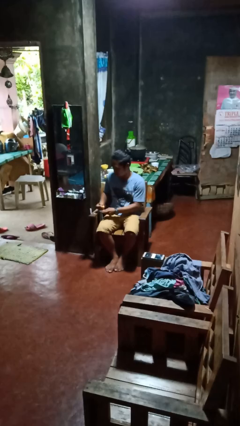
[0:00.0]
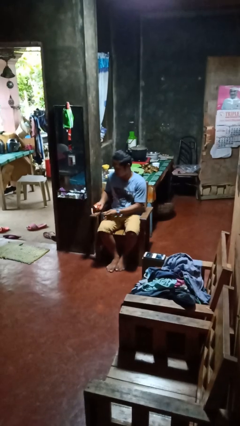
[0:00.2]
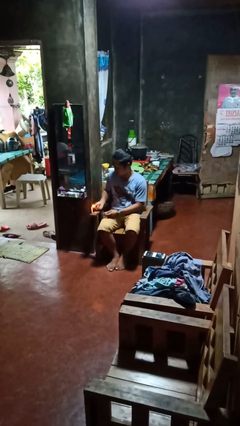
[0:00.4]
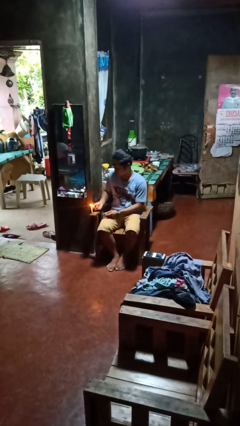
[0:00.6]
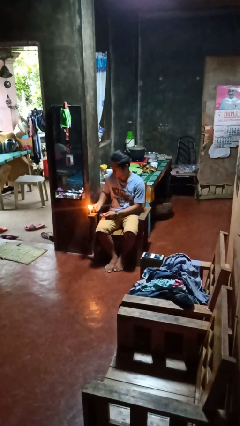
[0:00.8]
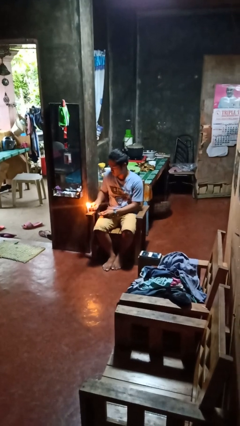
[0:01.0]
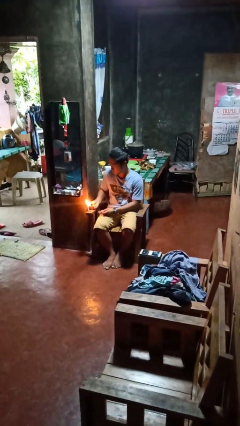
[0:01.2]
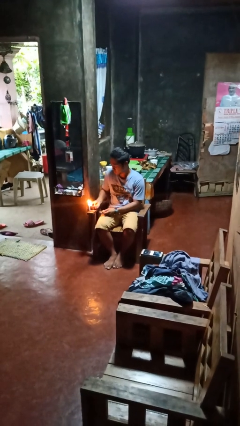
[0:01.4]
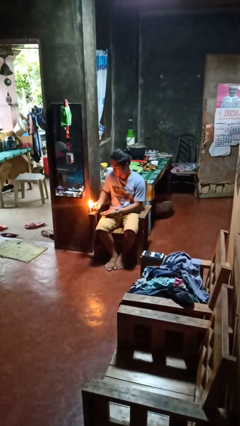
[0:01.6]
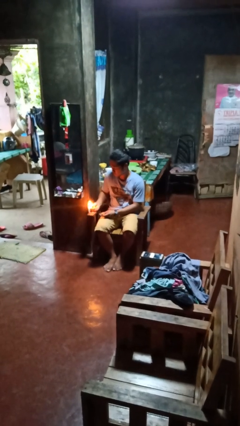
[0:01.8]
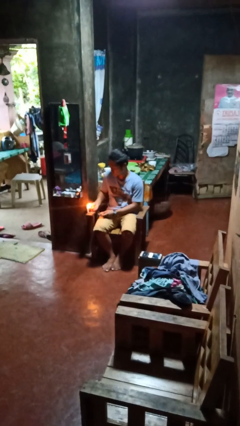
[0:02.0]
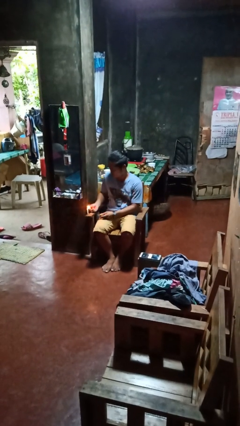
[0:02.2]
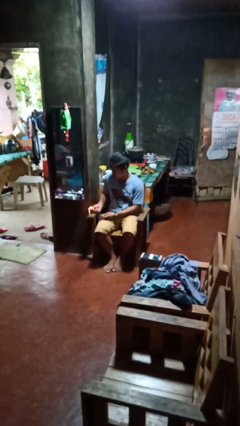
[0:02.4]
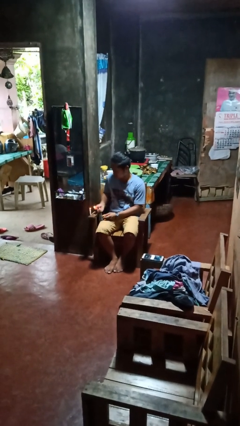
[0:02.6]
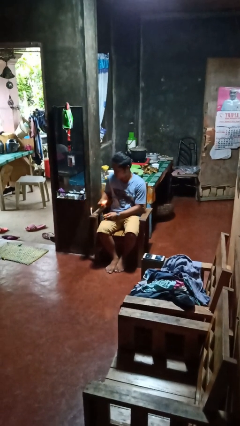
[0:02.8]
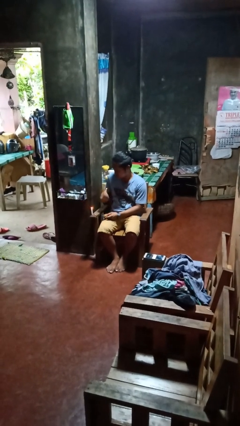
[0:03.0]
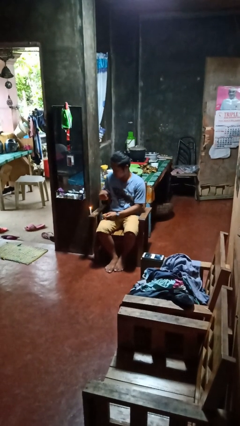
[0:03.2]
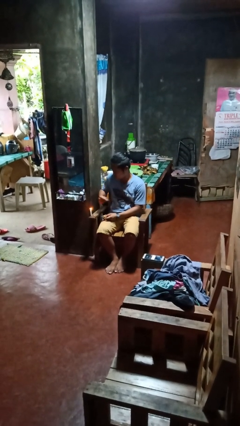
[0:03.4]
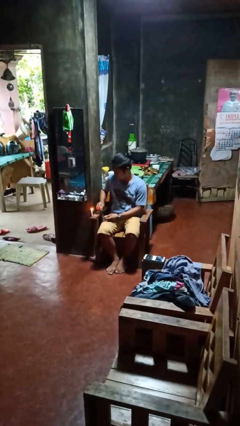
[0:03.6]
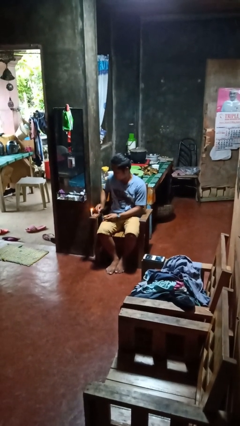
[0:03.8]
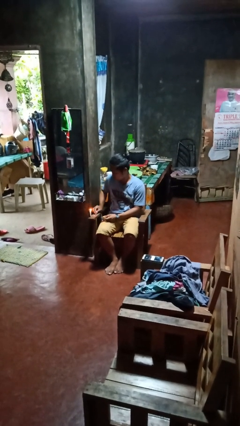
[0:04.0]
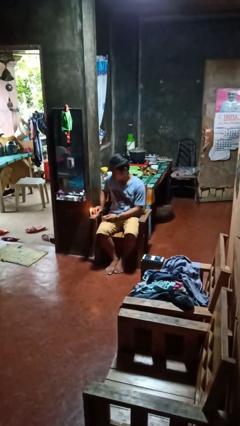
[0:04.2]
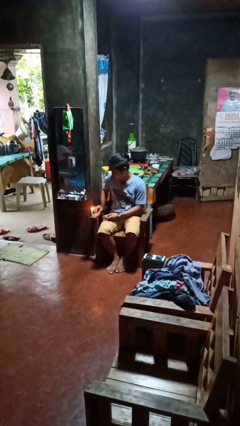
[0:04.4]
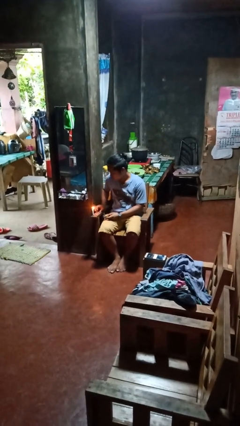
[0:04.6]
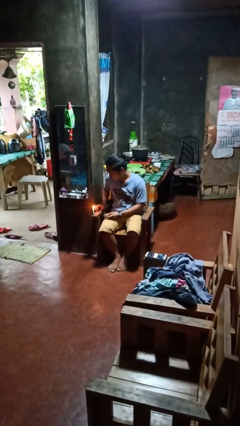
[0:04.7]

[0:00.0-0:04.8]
person lights candle

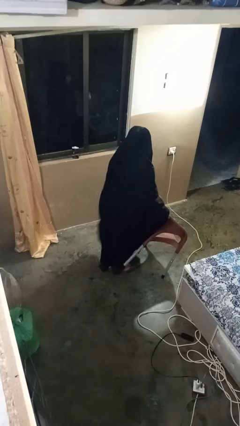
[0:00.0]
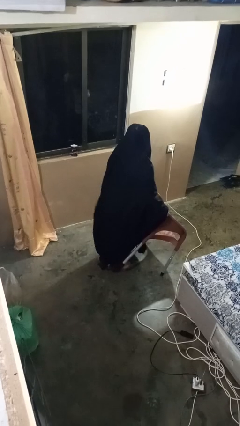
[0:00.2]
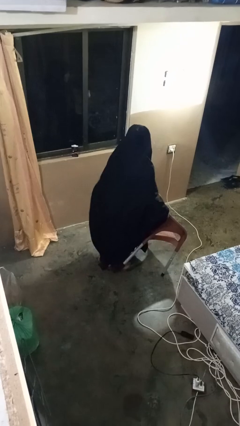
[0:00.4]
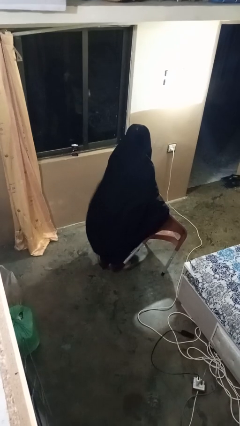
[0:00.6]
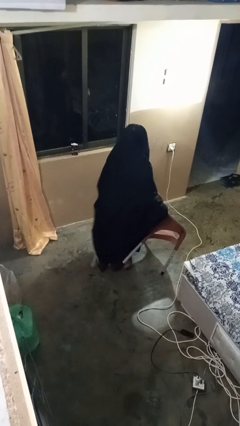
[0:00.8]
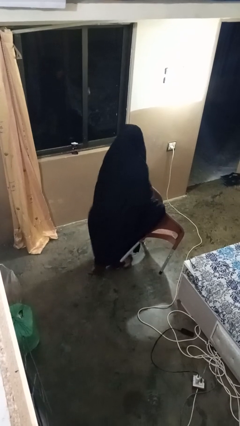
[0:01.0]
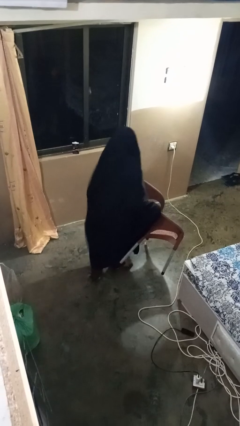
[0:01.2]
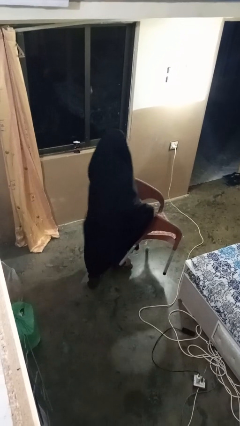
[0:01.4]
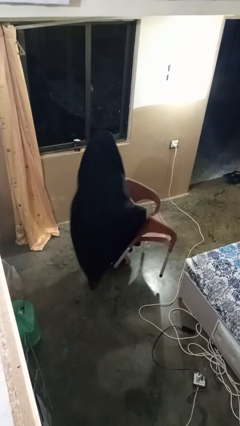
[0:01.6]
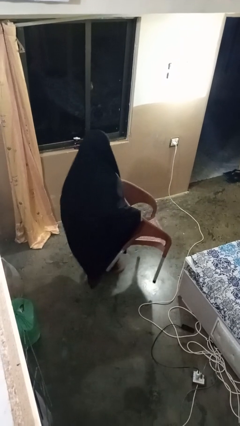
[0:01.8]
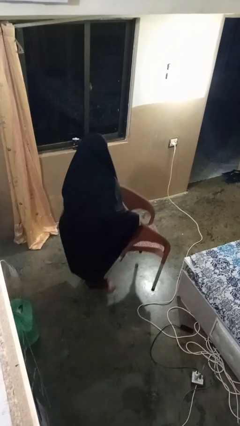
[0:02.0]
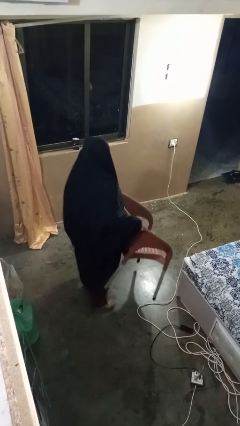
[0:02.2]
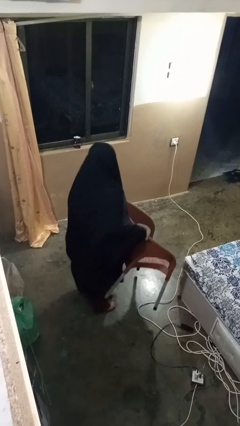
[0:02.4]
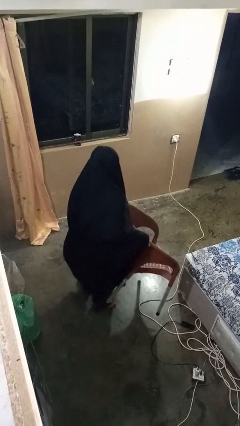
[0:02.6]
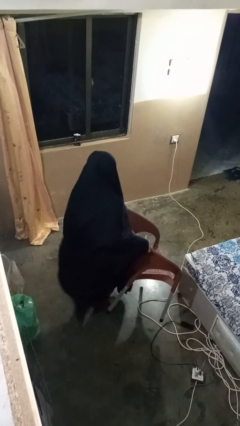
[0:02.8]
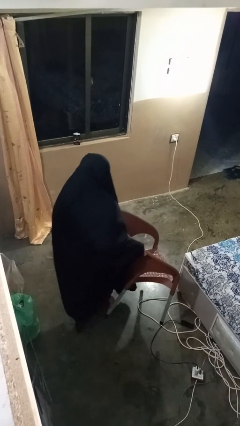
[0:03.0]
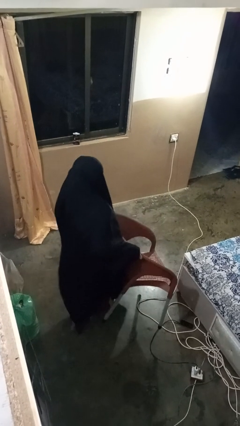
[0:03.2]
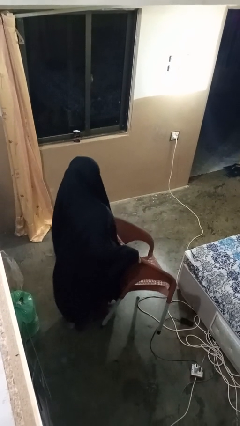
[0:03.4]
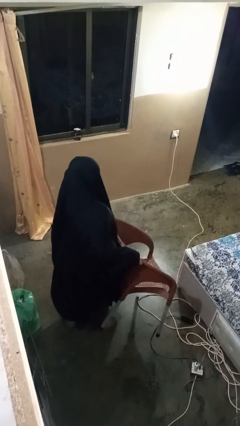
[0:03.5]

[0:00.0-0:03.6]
person carries furniture

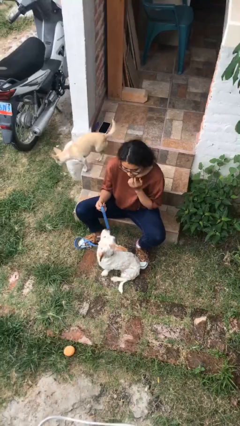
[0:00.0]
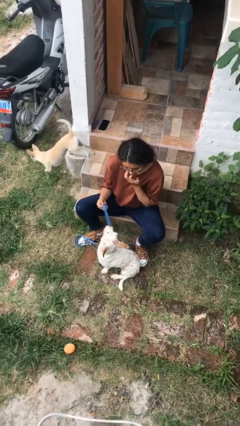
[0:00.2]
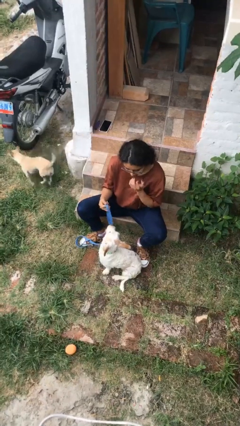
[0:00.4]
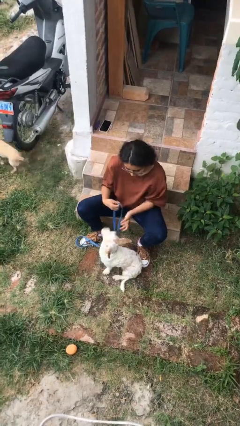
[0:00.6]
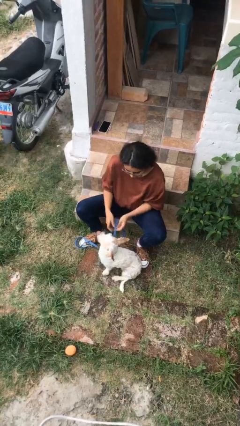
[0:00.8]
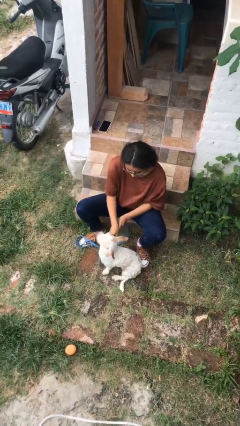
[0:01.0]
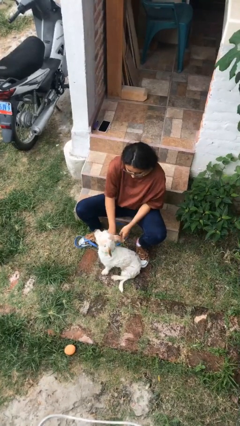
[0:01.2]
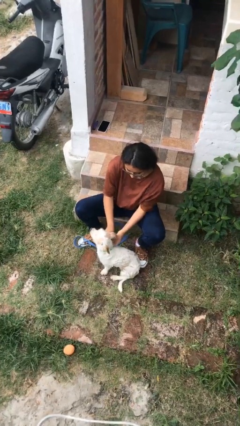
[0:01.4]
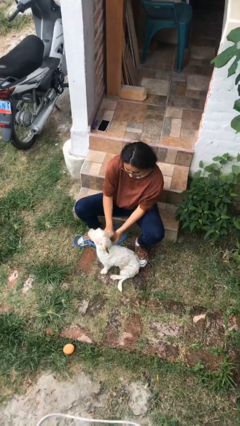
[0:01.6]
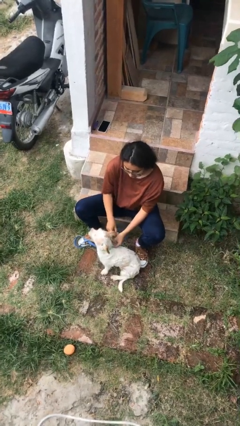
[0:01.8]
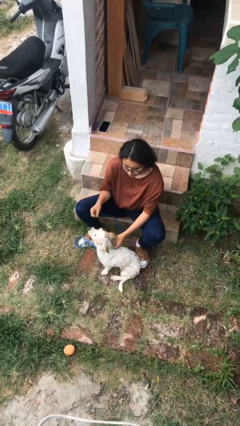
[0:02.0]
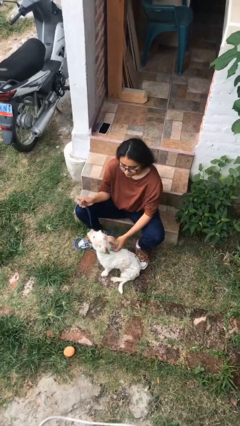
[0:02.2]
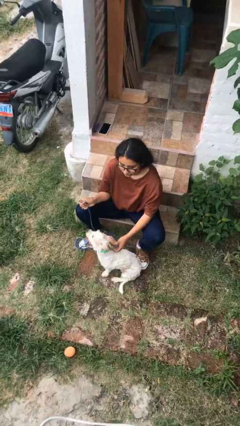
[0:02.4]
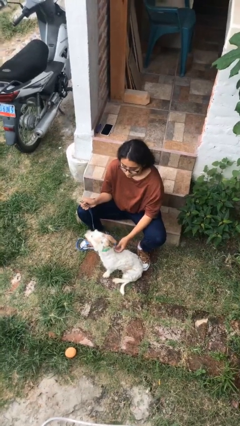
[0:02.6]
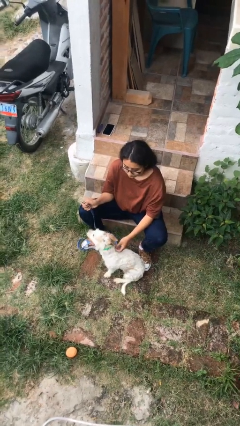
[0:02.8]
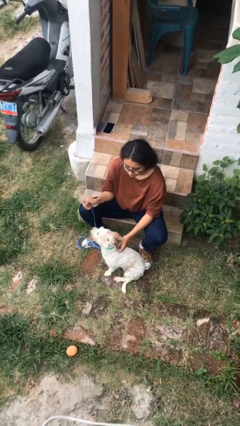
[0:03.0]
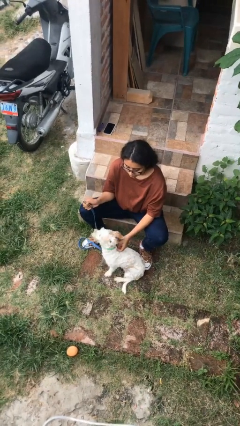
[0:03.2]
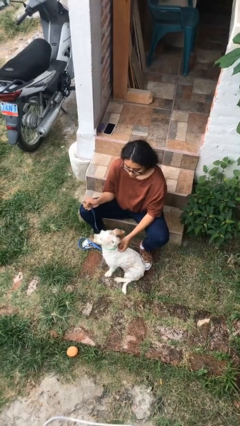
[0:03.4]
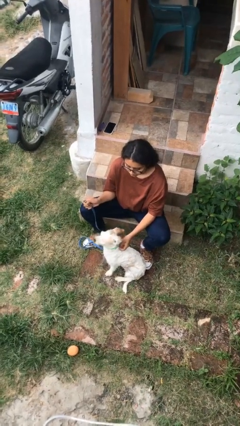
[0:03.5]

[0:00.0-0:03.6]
person unattaches leash from dog

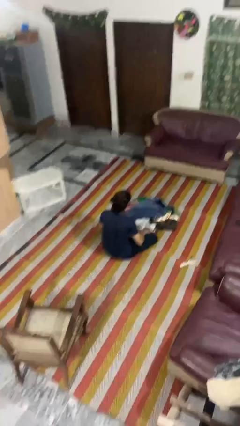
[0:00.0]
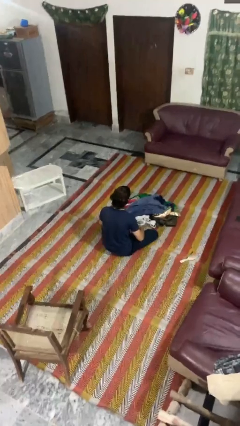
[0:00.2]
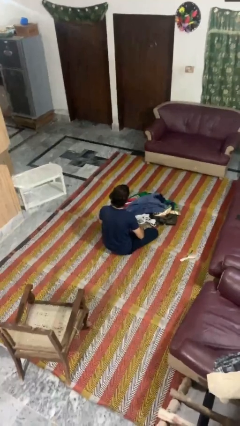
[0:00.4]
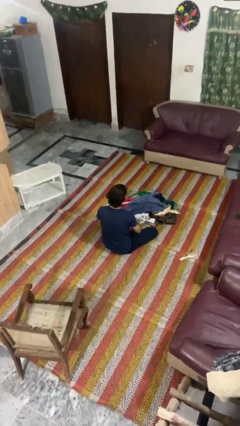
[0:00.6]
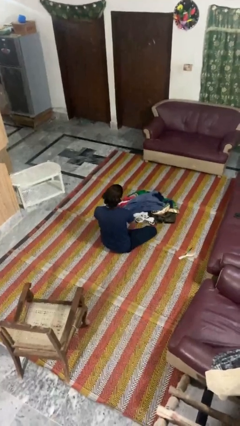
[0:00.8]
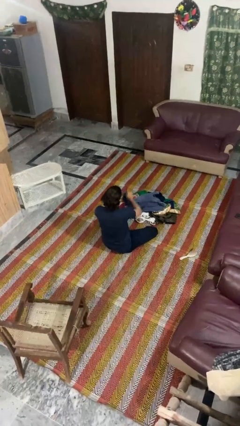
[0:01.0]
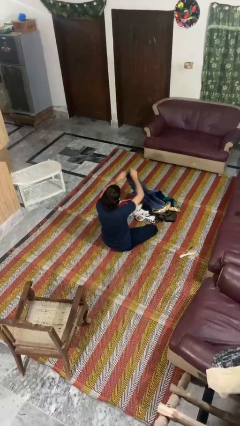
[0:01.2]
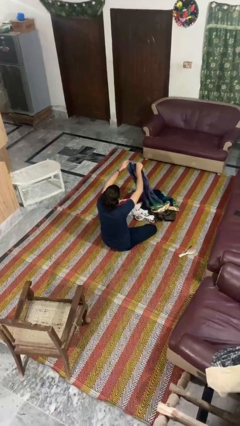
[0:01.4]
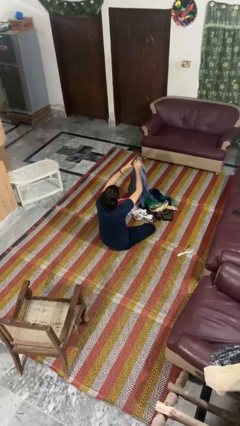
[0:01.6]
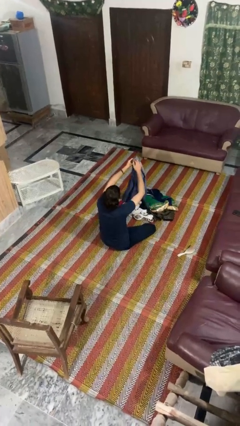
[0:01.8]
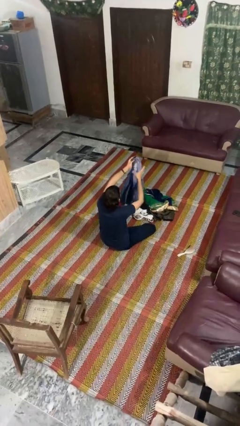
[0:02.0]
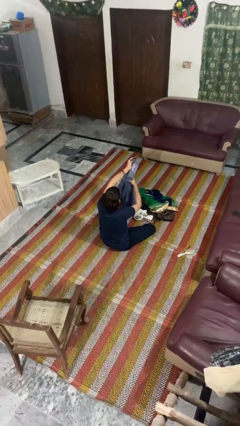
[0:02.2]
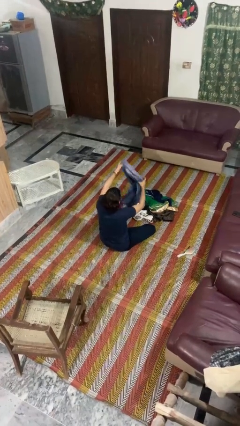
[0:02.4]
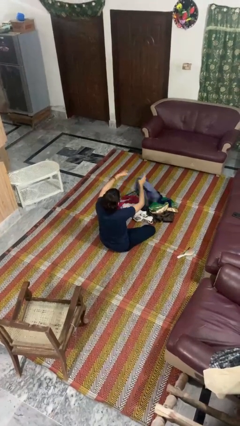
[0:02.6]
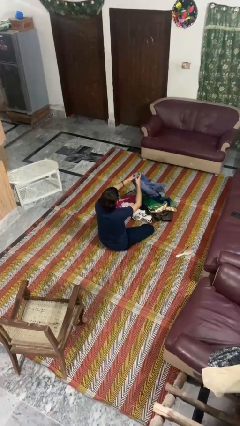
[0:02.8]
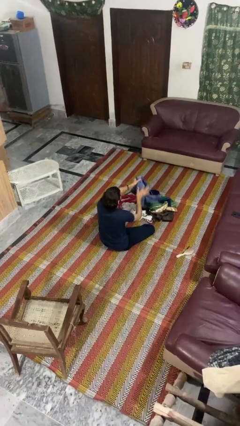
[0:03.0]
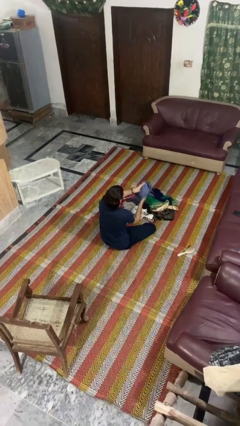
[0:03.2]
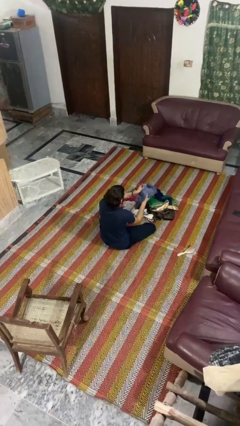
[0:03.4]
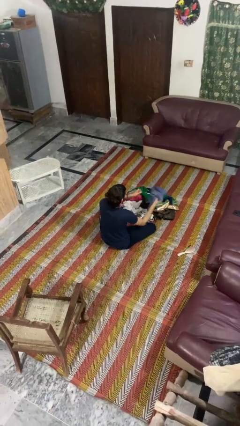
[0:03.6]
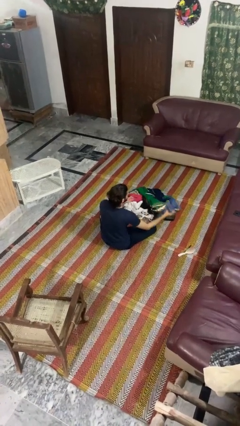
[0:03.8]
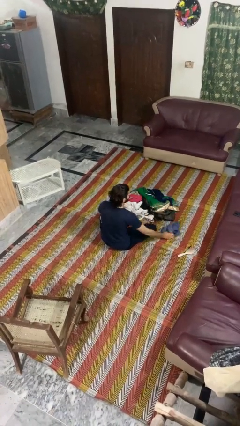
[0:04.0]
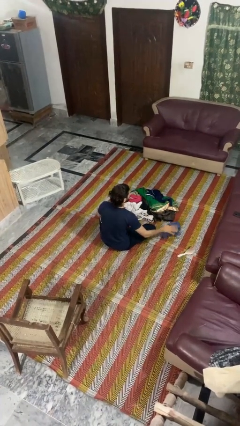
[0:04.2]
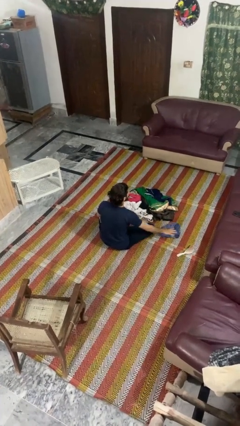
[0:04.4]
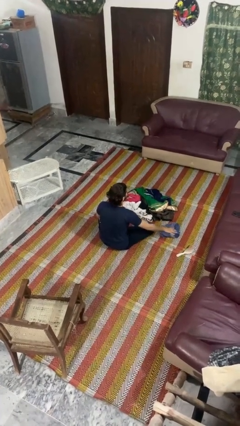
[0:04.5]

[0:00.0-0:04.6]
person folds pants

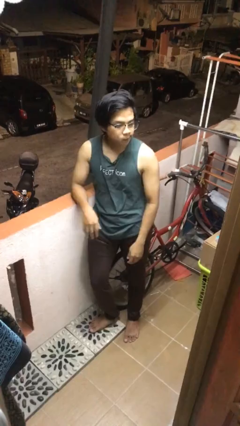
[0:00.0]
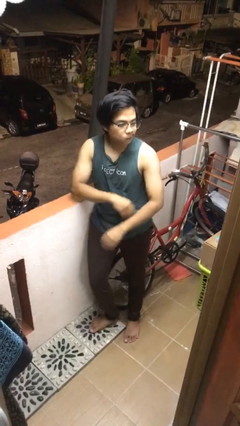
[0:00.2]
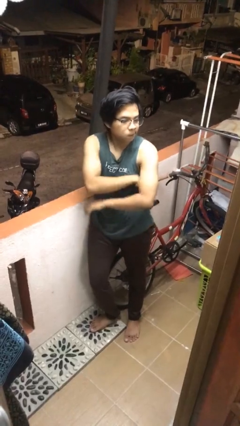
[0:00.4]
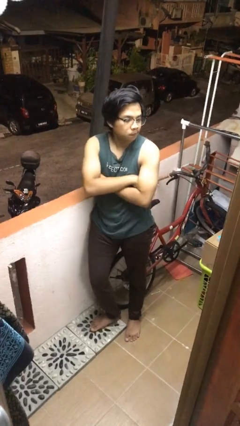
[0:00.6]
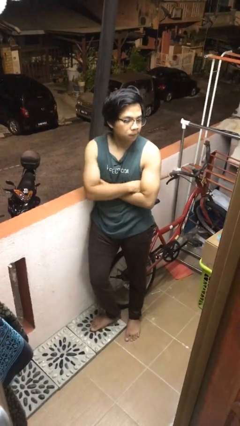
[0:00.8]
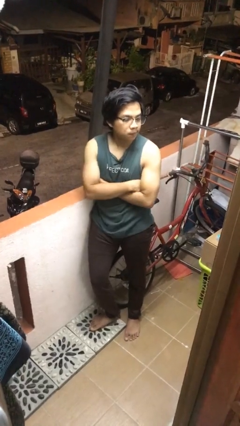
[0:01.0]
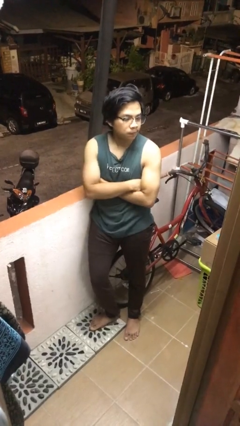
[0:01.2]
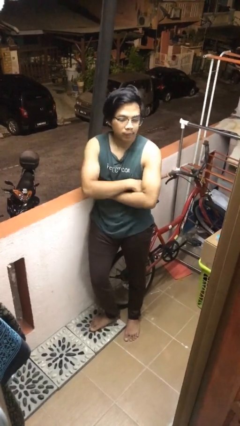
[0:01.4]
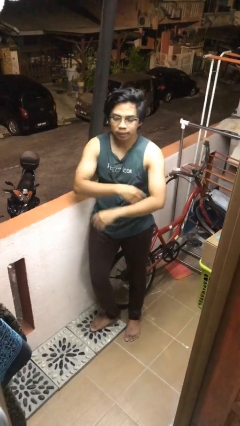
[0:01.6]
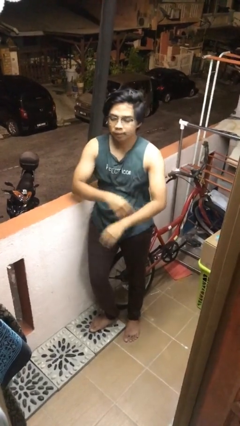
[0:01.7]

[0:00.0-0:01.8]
person crosses arms
